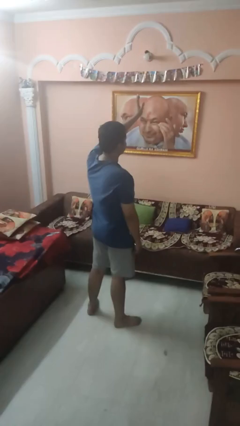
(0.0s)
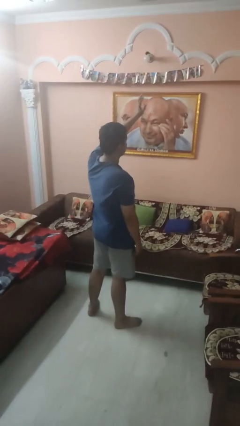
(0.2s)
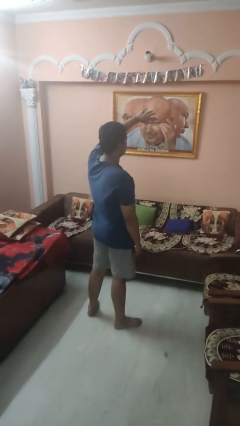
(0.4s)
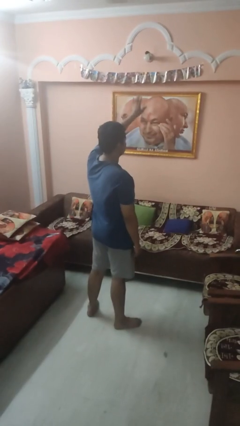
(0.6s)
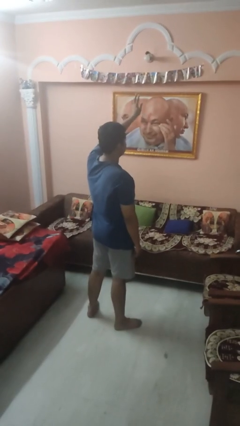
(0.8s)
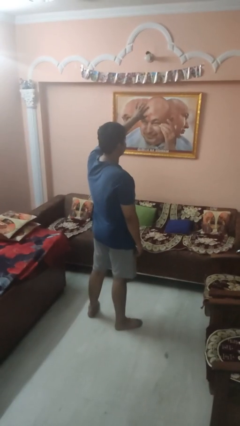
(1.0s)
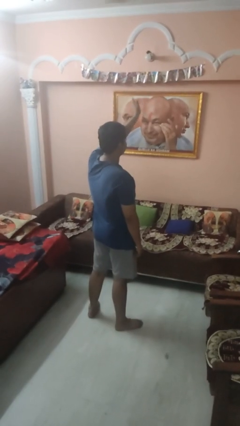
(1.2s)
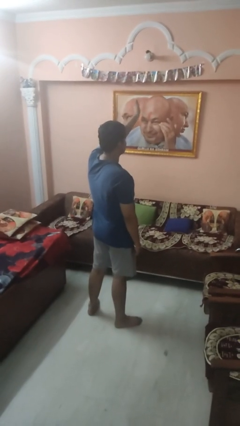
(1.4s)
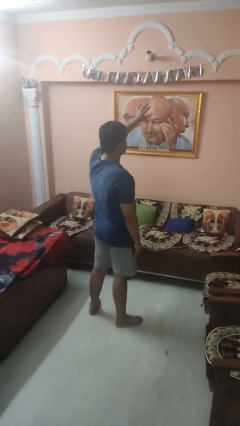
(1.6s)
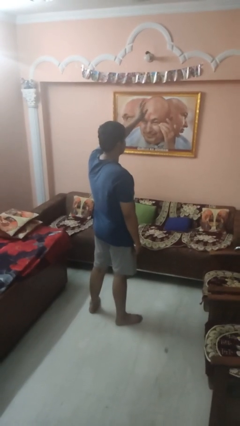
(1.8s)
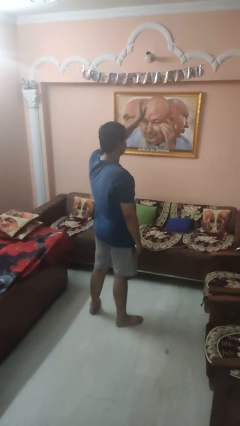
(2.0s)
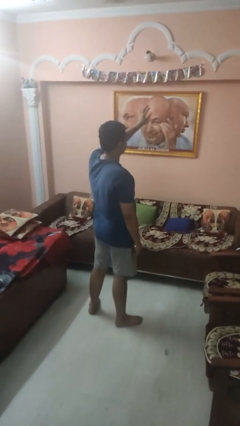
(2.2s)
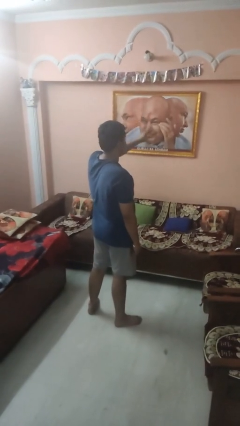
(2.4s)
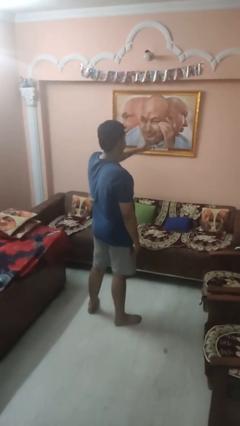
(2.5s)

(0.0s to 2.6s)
person waves at person

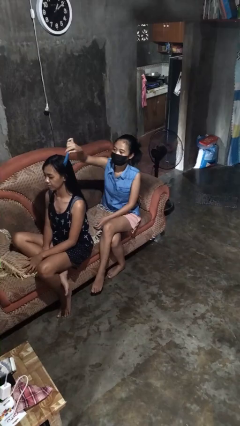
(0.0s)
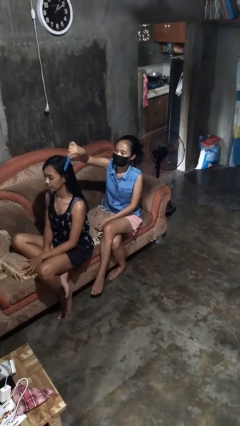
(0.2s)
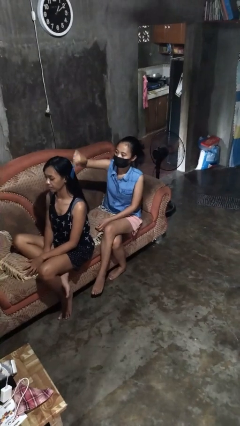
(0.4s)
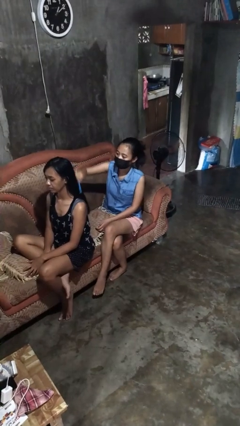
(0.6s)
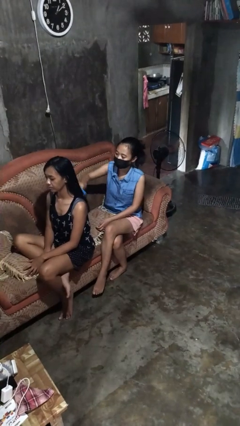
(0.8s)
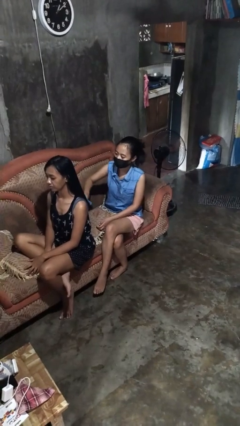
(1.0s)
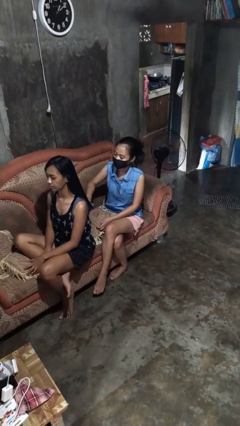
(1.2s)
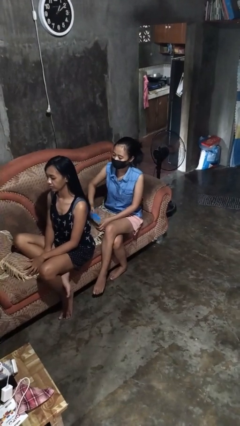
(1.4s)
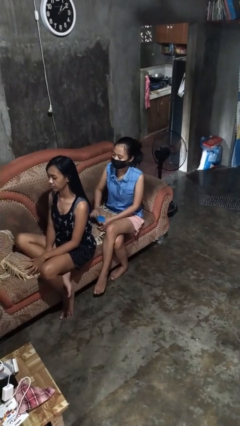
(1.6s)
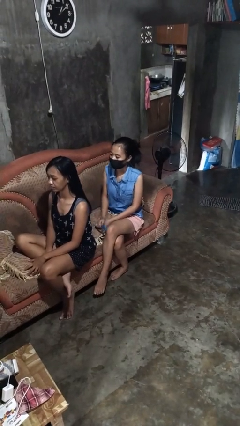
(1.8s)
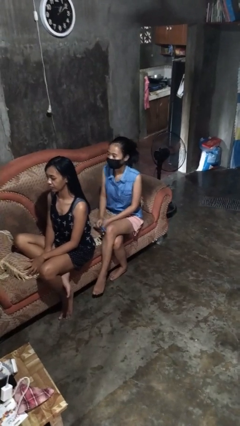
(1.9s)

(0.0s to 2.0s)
person brushes hair of person

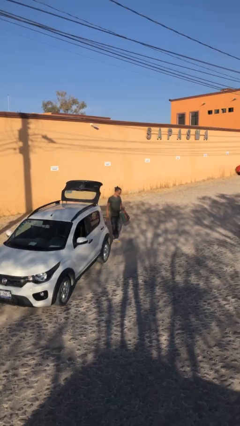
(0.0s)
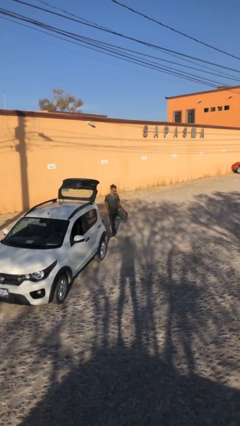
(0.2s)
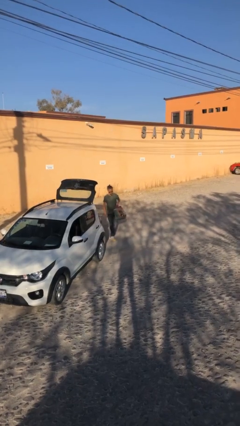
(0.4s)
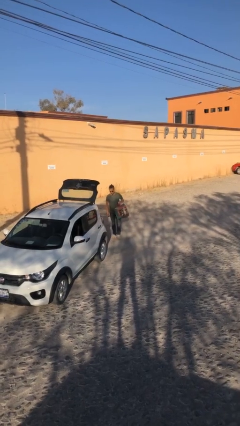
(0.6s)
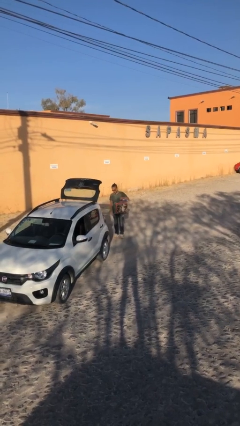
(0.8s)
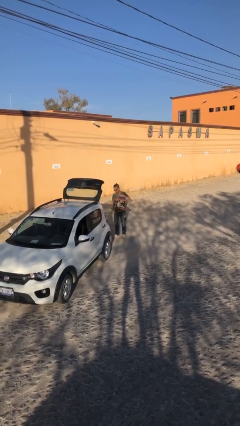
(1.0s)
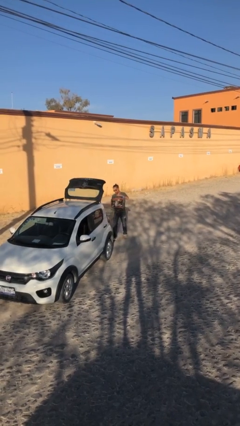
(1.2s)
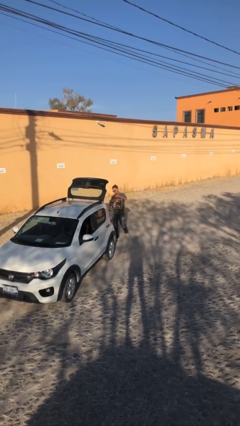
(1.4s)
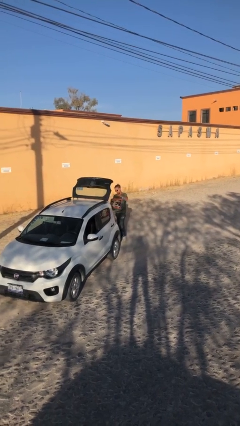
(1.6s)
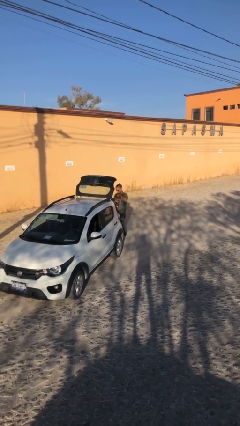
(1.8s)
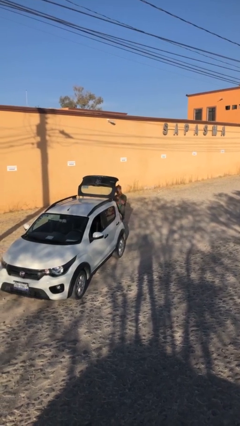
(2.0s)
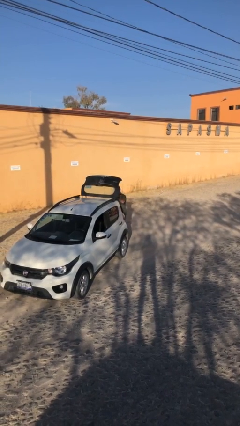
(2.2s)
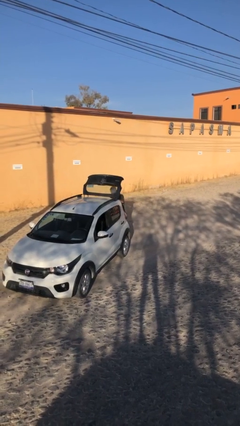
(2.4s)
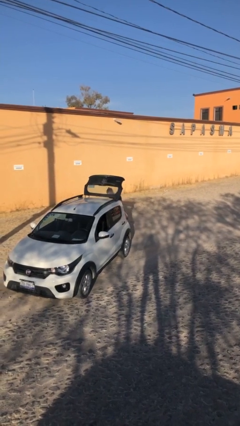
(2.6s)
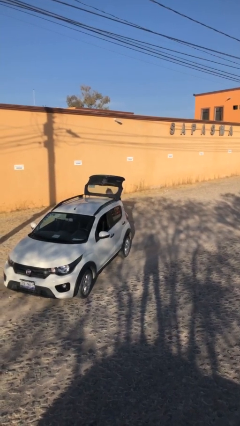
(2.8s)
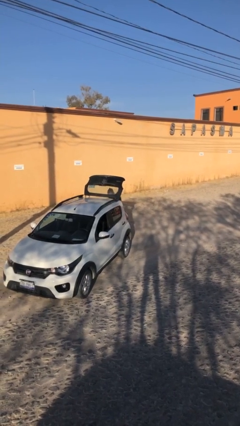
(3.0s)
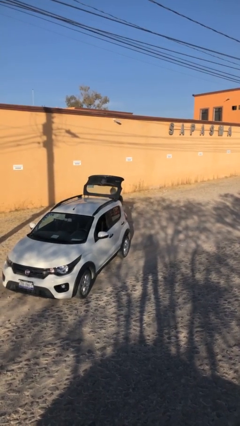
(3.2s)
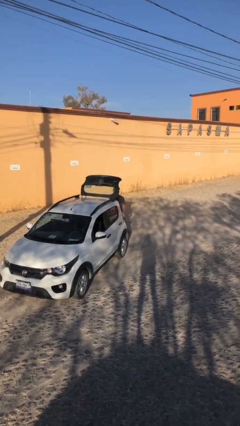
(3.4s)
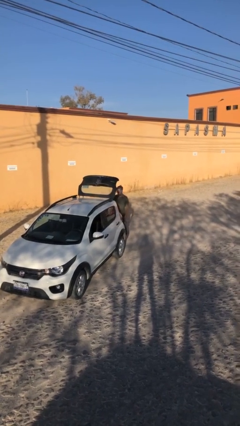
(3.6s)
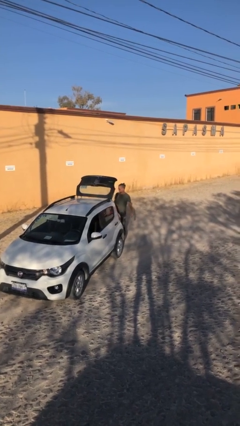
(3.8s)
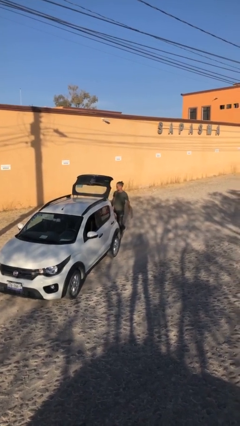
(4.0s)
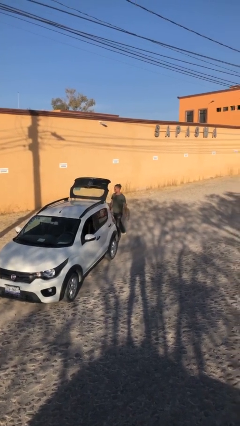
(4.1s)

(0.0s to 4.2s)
person loads car

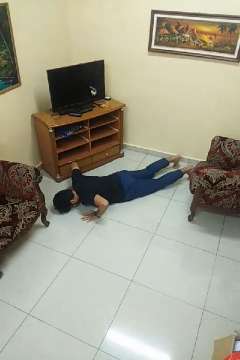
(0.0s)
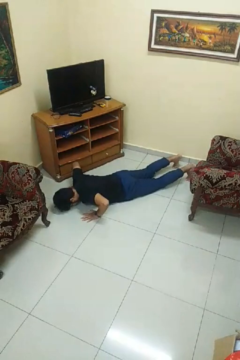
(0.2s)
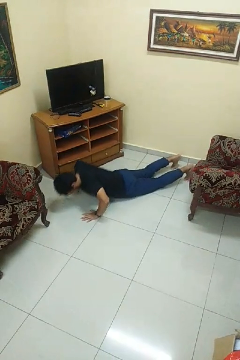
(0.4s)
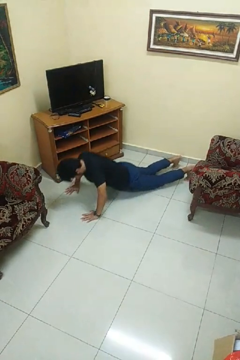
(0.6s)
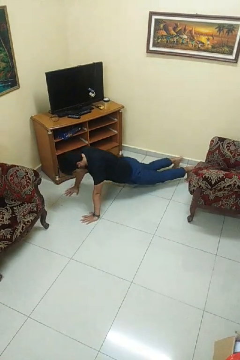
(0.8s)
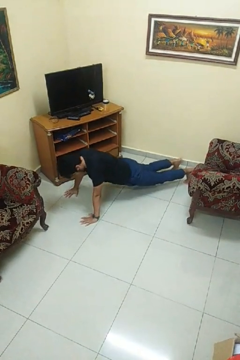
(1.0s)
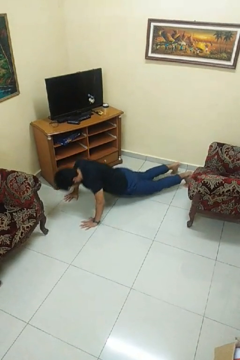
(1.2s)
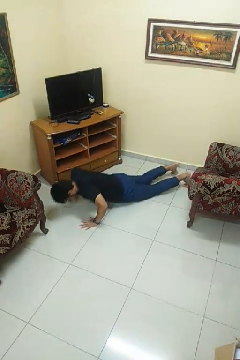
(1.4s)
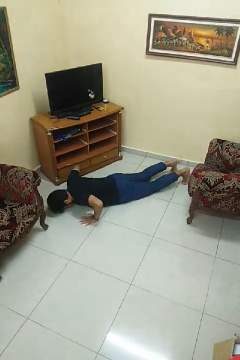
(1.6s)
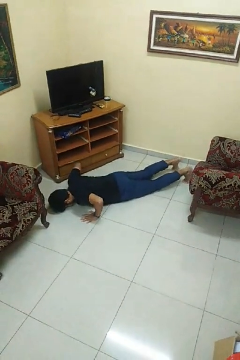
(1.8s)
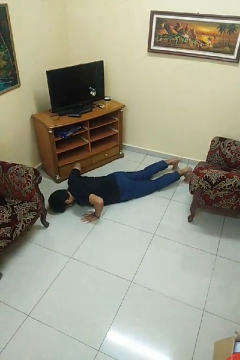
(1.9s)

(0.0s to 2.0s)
person exercises with pushup

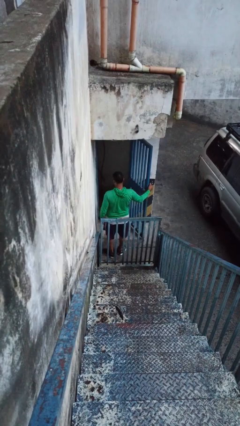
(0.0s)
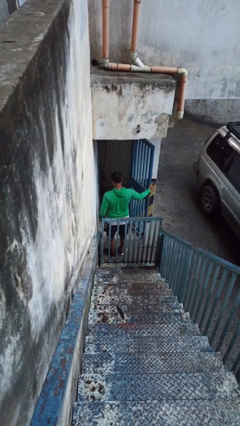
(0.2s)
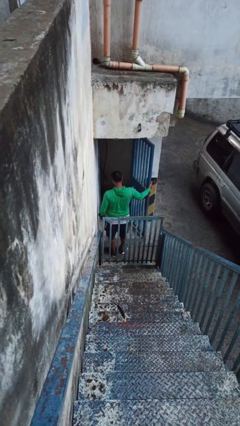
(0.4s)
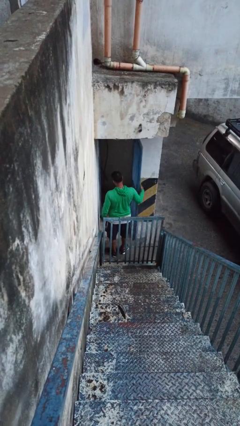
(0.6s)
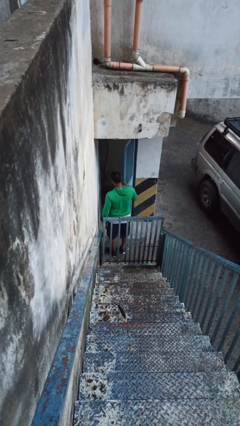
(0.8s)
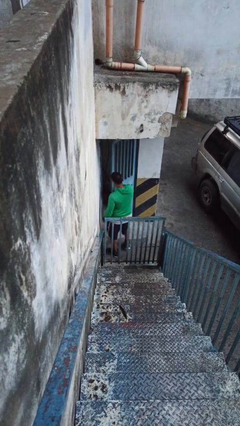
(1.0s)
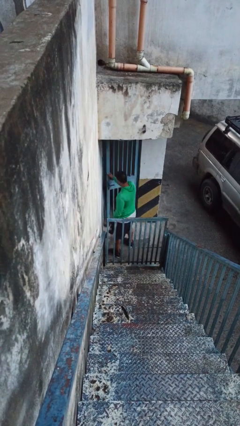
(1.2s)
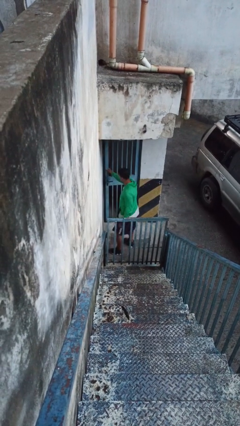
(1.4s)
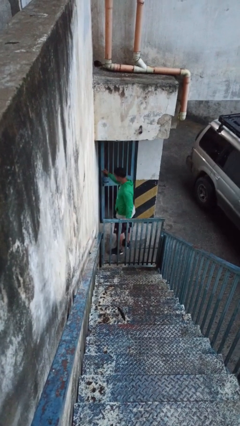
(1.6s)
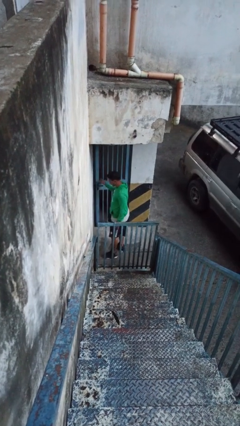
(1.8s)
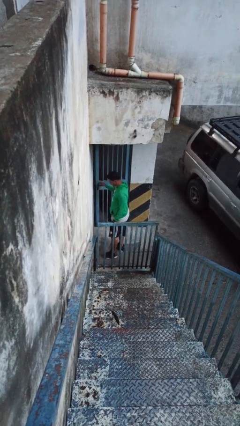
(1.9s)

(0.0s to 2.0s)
person closes facility door

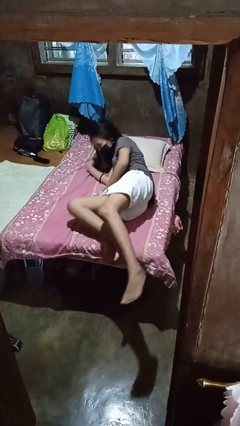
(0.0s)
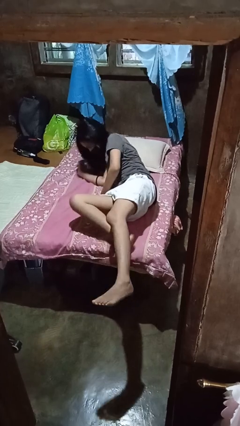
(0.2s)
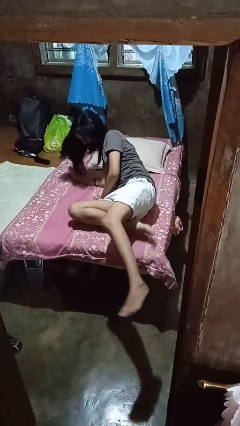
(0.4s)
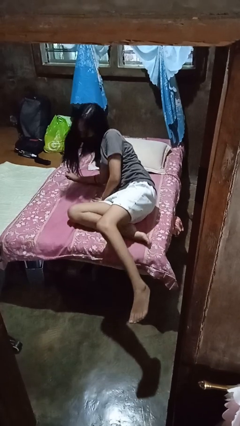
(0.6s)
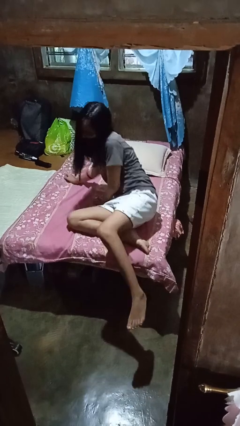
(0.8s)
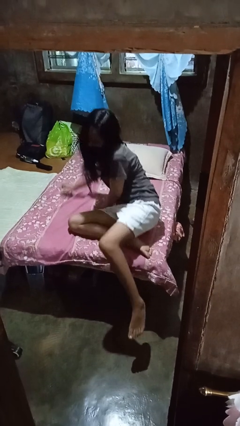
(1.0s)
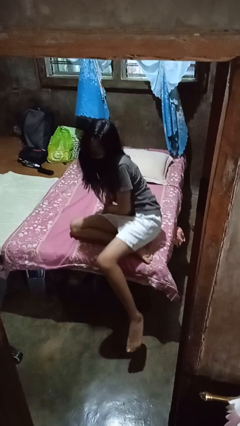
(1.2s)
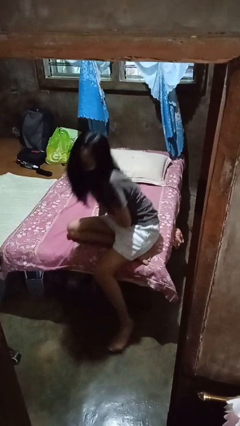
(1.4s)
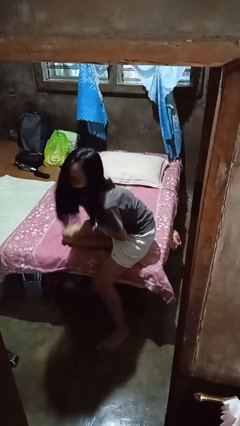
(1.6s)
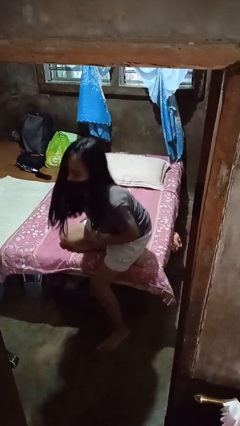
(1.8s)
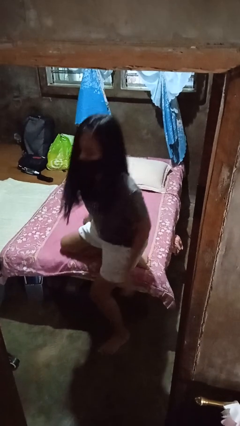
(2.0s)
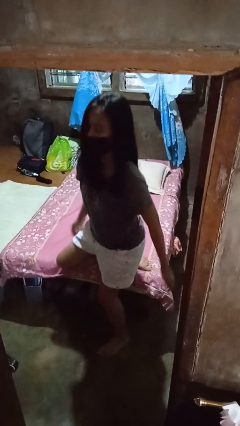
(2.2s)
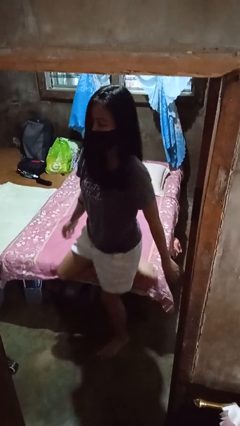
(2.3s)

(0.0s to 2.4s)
person stands up

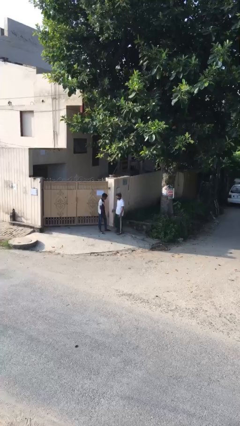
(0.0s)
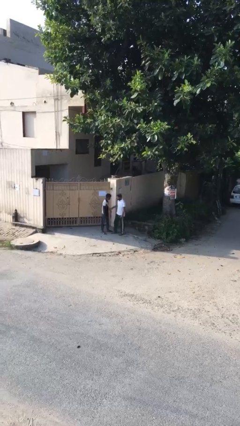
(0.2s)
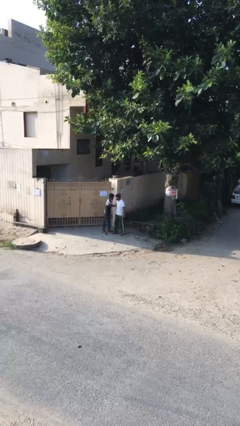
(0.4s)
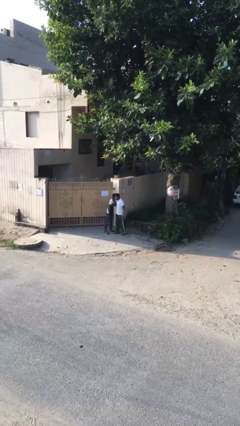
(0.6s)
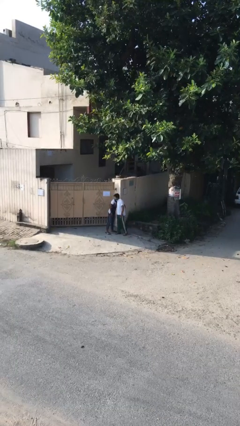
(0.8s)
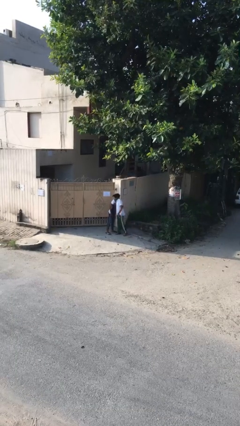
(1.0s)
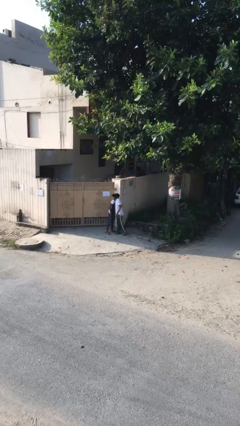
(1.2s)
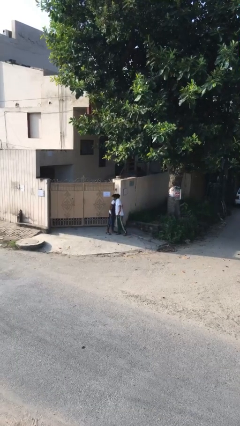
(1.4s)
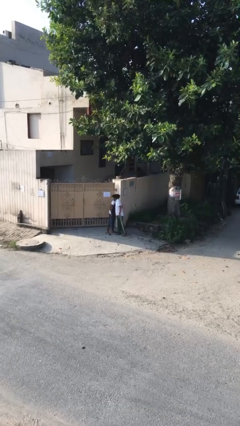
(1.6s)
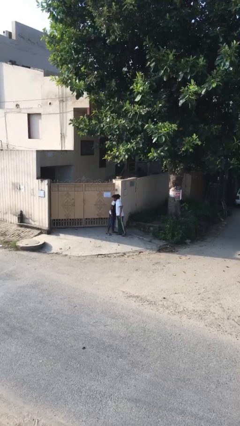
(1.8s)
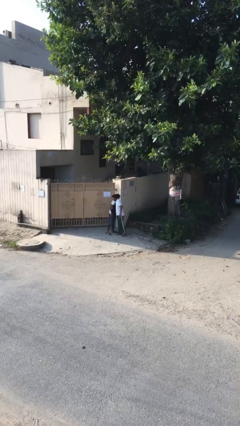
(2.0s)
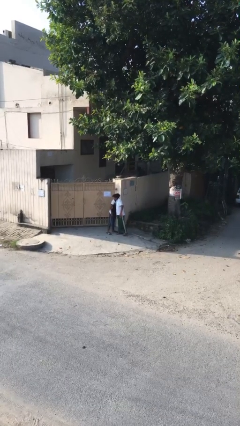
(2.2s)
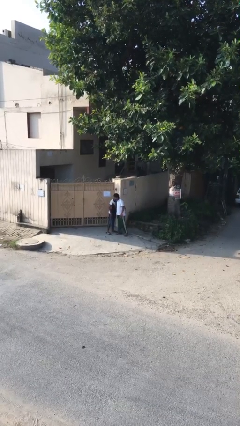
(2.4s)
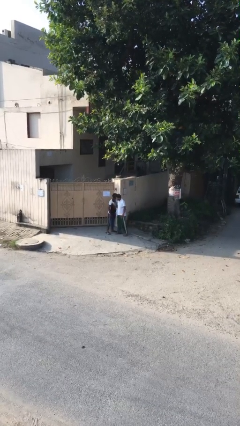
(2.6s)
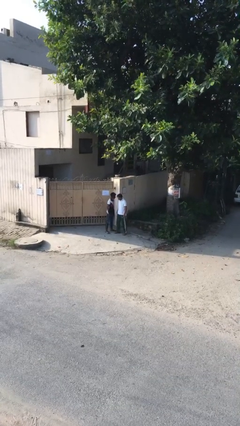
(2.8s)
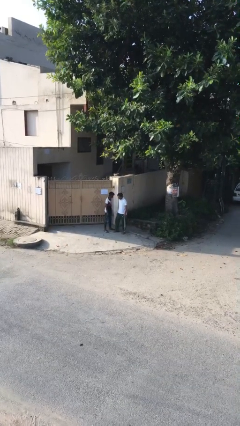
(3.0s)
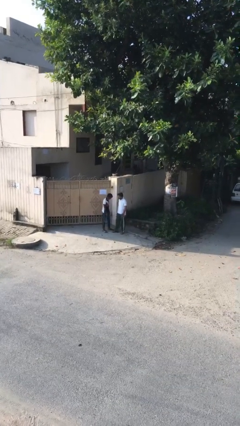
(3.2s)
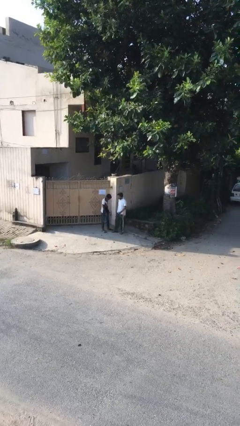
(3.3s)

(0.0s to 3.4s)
person embraces person
